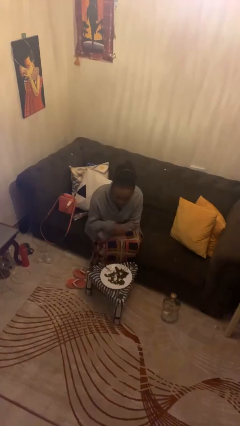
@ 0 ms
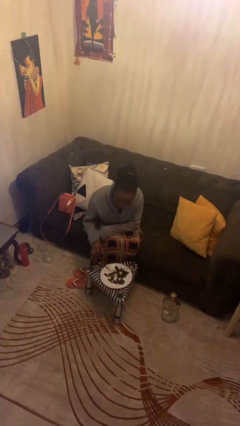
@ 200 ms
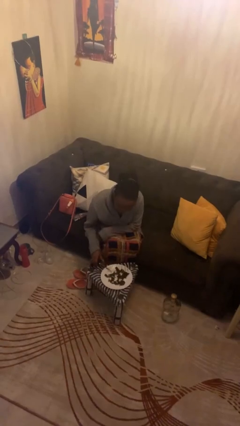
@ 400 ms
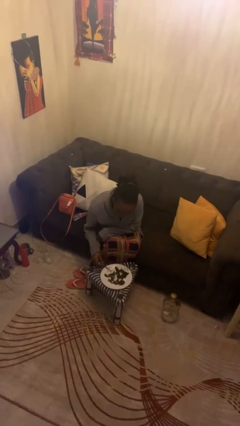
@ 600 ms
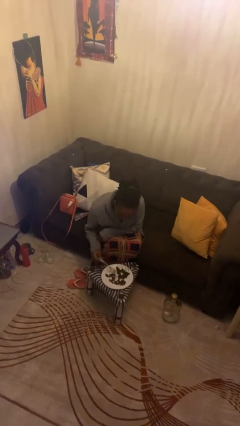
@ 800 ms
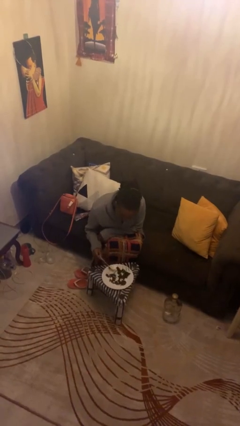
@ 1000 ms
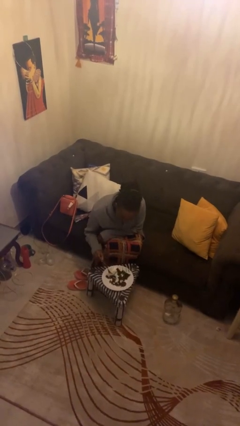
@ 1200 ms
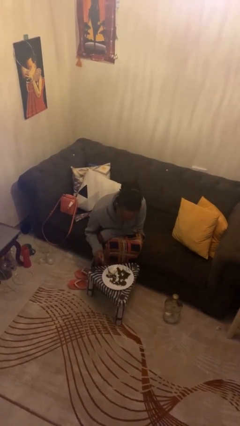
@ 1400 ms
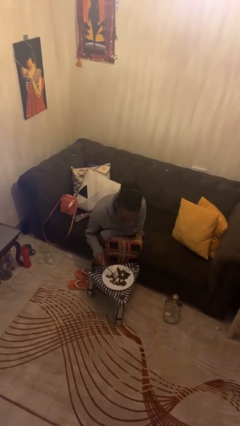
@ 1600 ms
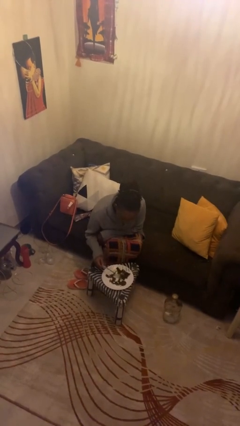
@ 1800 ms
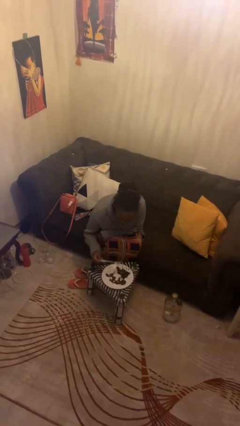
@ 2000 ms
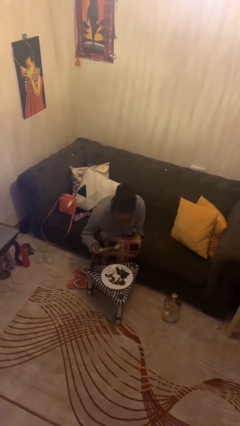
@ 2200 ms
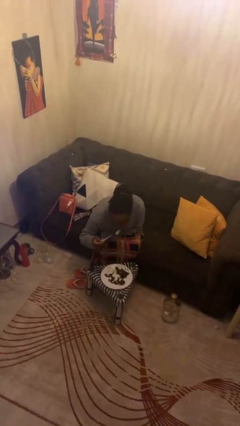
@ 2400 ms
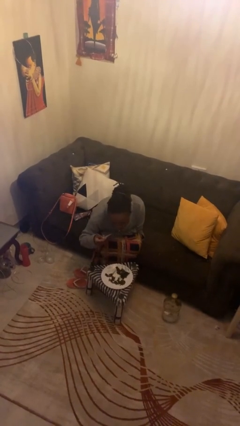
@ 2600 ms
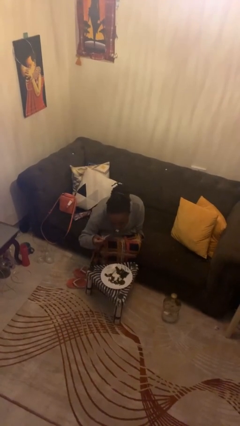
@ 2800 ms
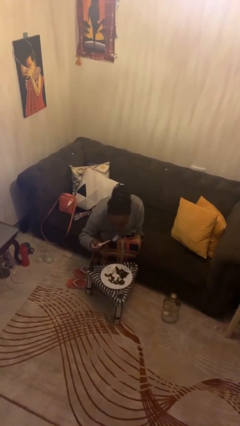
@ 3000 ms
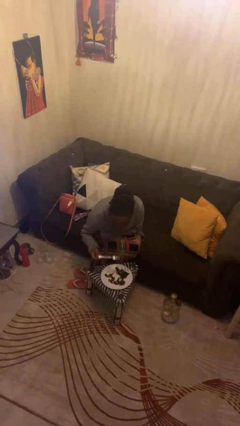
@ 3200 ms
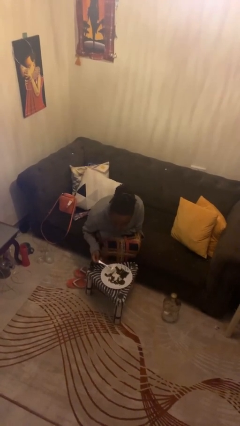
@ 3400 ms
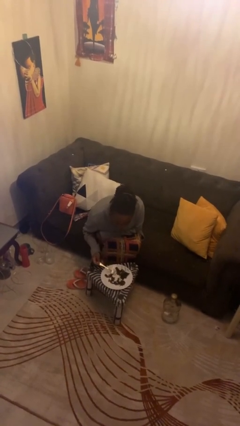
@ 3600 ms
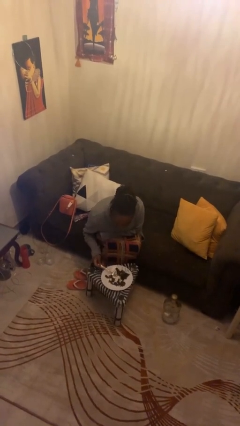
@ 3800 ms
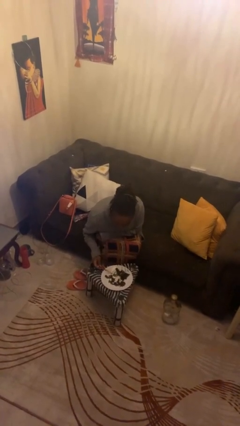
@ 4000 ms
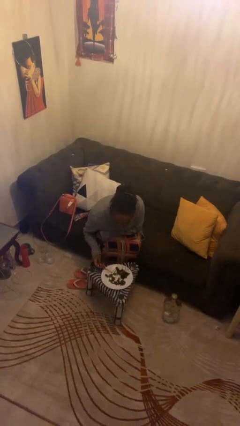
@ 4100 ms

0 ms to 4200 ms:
person eats with utensil

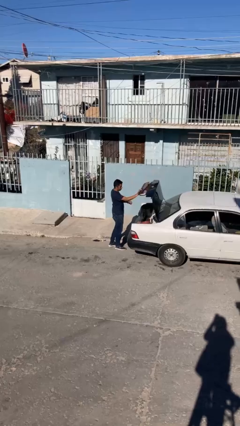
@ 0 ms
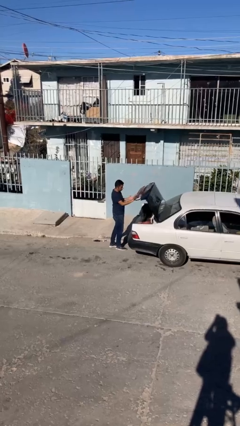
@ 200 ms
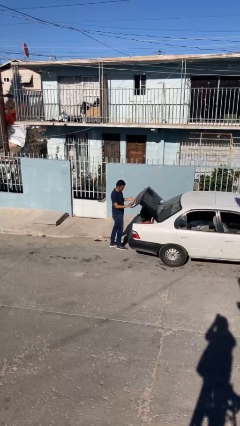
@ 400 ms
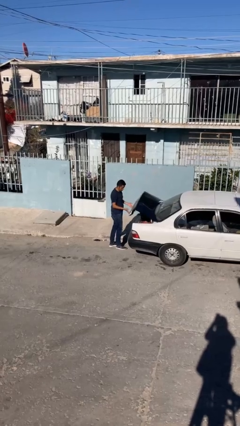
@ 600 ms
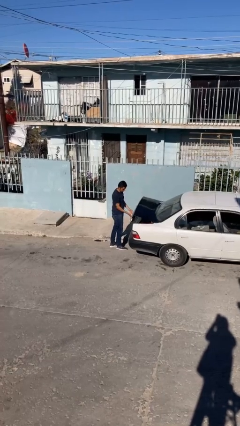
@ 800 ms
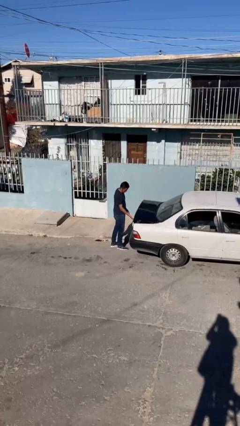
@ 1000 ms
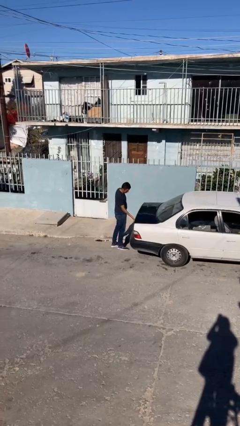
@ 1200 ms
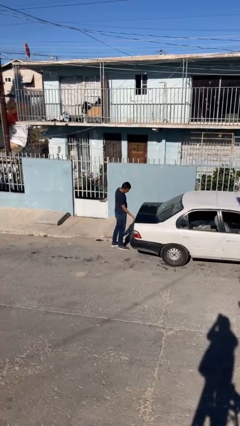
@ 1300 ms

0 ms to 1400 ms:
person closes car trunk

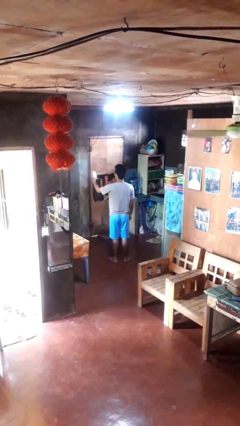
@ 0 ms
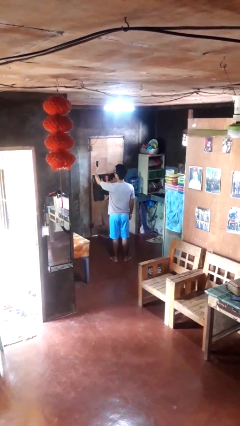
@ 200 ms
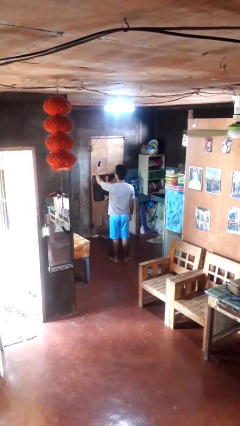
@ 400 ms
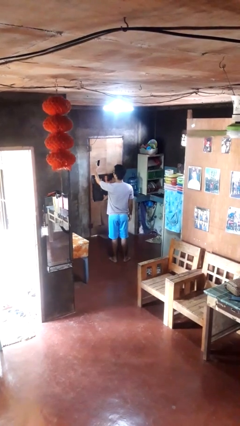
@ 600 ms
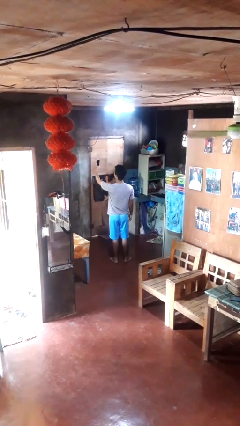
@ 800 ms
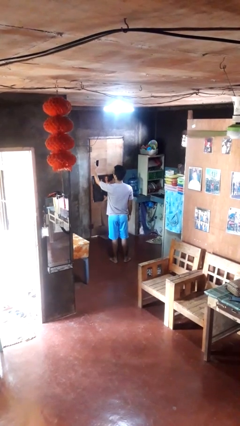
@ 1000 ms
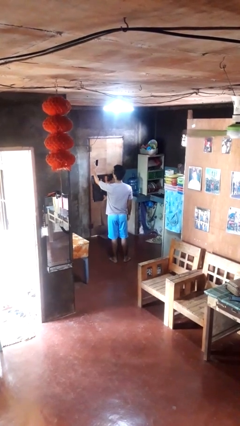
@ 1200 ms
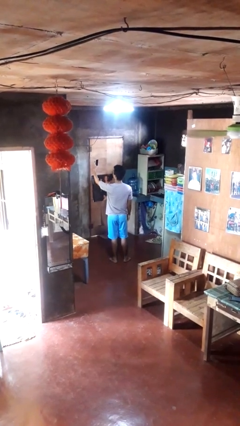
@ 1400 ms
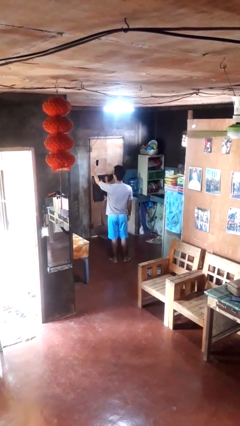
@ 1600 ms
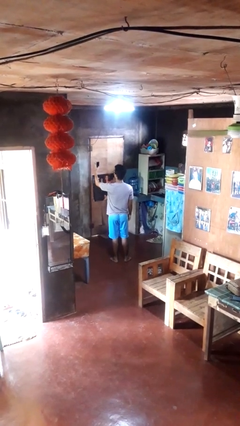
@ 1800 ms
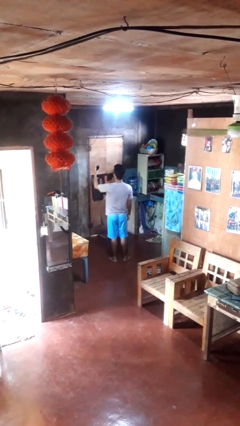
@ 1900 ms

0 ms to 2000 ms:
person takes selfie

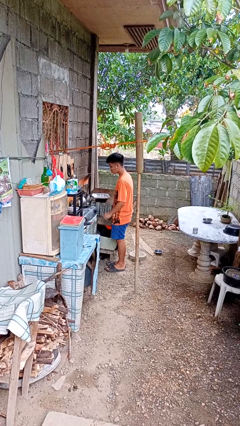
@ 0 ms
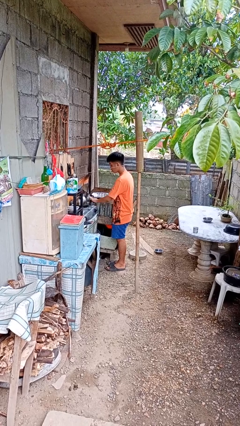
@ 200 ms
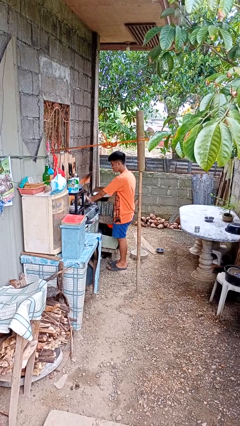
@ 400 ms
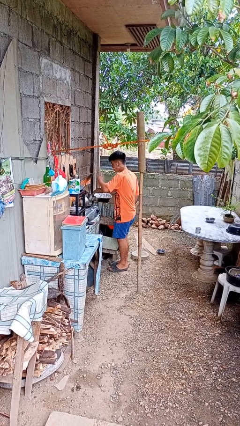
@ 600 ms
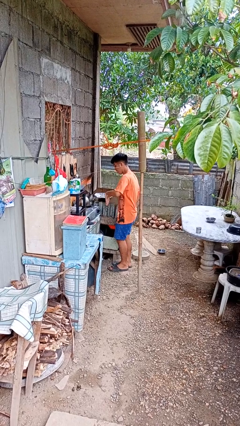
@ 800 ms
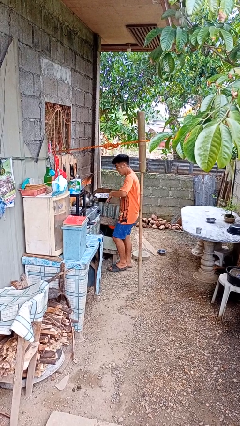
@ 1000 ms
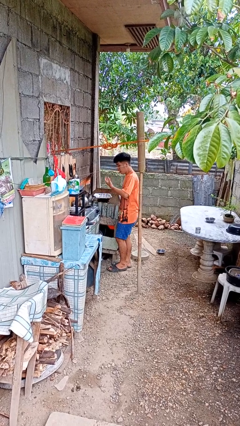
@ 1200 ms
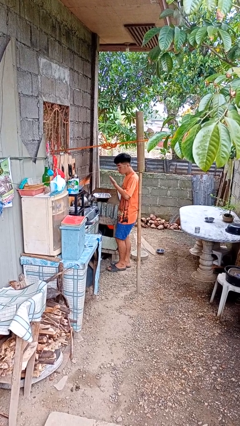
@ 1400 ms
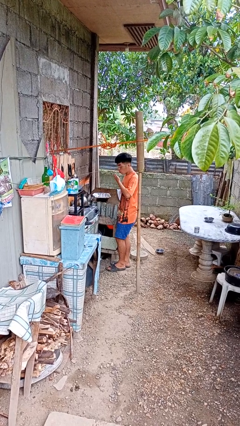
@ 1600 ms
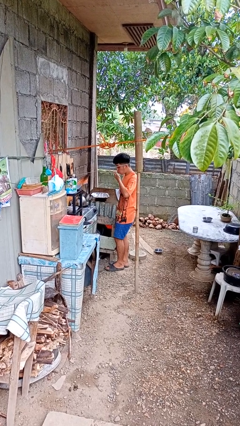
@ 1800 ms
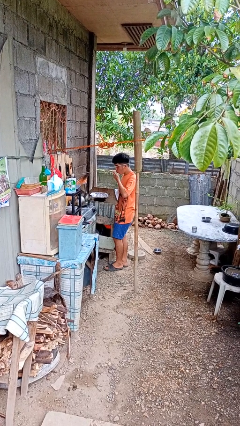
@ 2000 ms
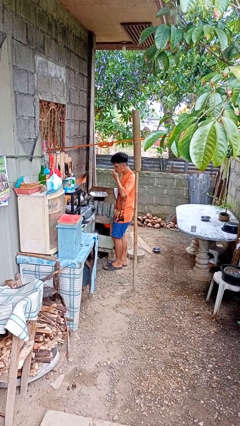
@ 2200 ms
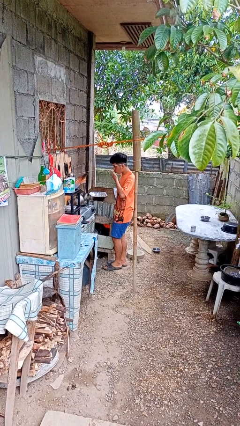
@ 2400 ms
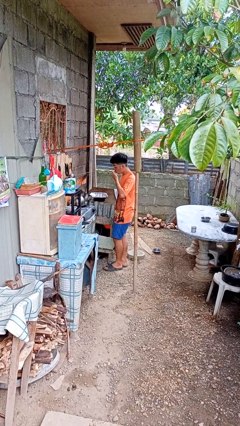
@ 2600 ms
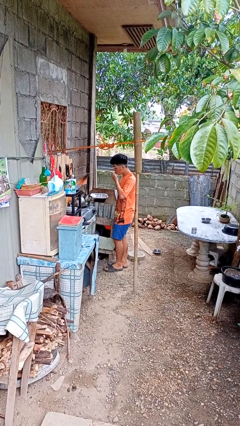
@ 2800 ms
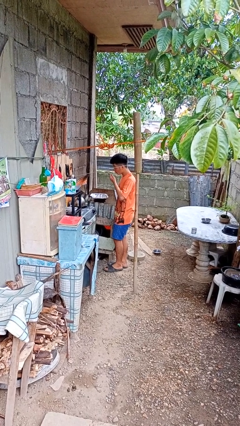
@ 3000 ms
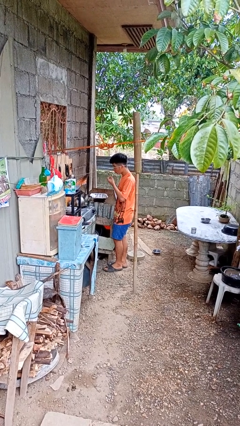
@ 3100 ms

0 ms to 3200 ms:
person burns hand

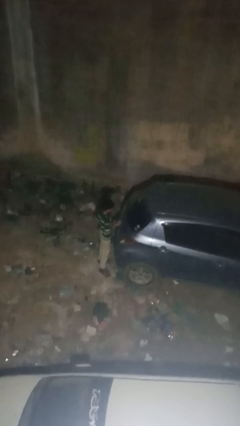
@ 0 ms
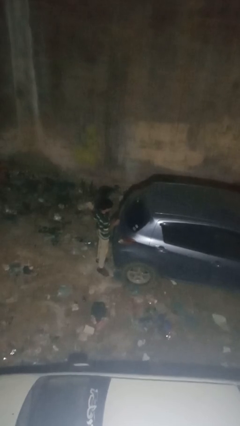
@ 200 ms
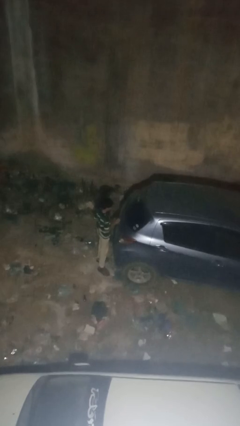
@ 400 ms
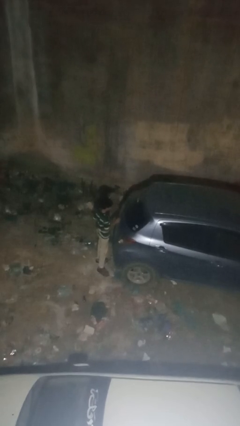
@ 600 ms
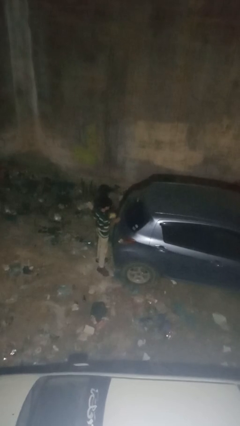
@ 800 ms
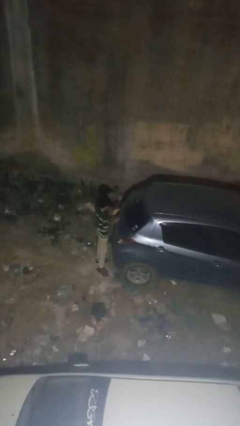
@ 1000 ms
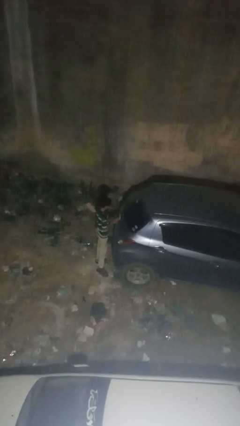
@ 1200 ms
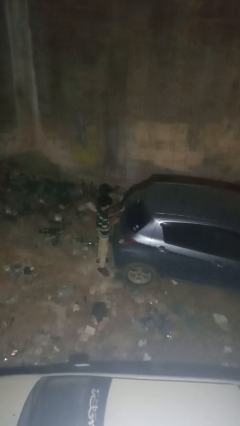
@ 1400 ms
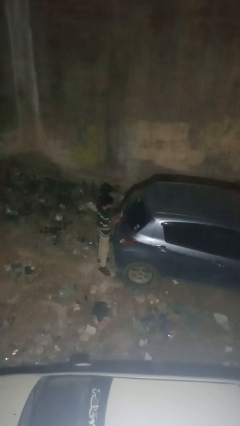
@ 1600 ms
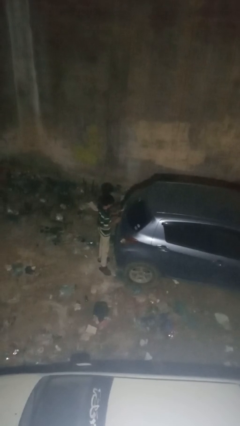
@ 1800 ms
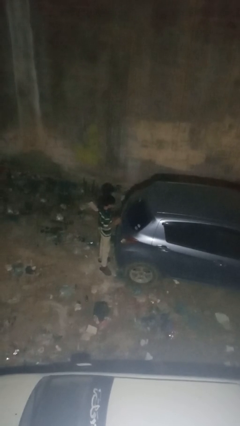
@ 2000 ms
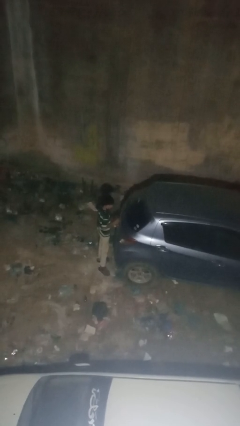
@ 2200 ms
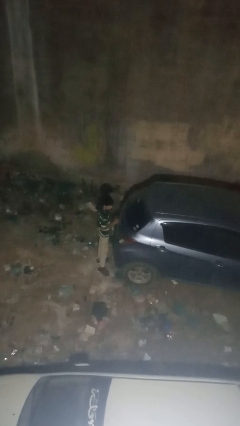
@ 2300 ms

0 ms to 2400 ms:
person polishes car with rag

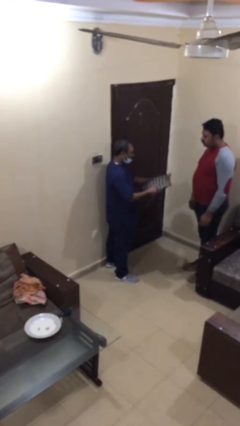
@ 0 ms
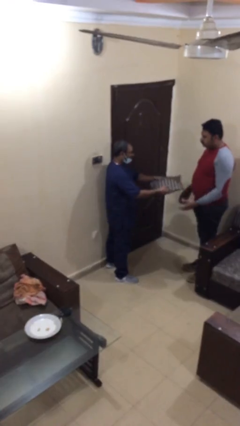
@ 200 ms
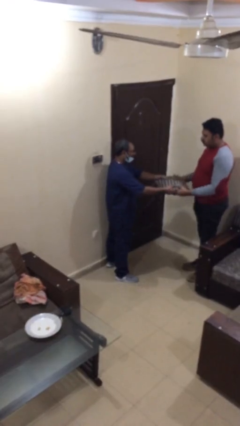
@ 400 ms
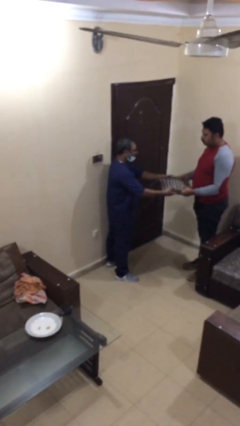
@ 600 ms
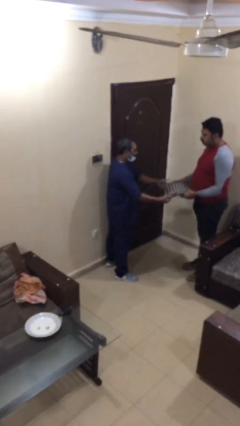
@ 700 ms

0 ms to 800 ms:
person transfers object to person

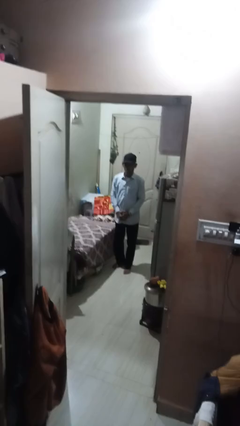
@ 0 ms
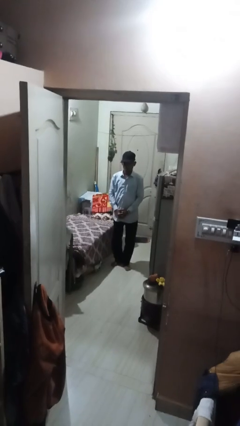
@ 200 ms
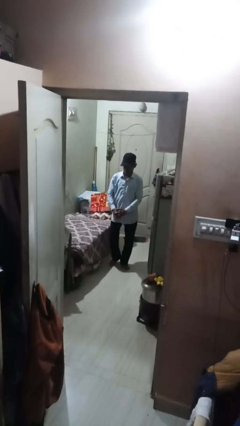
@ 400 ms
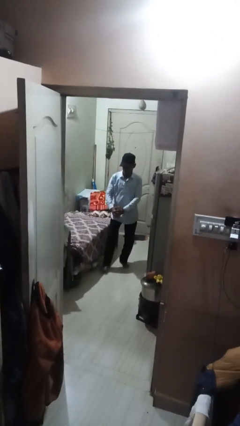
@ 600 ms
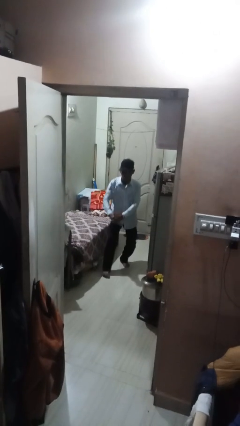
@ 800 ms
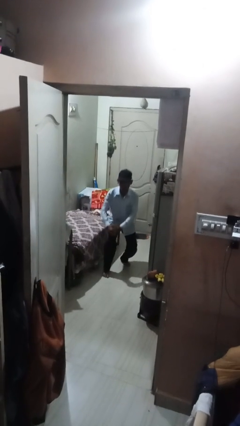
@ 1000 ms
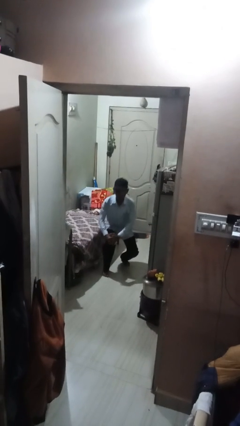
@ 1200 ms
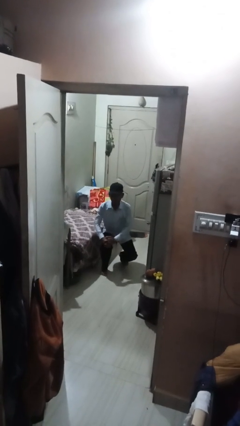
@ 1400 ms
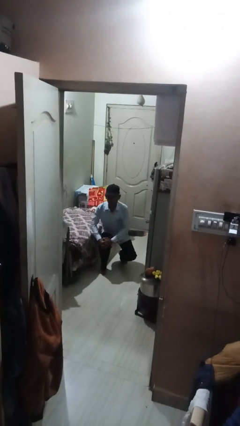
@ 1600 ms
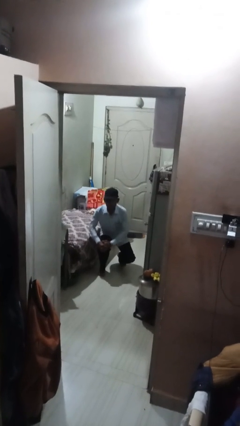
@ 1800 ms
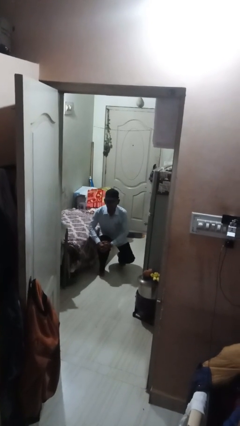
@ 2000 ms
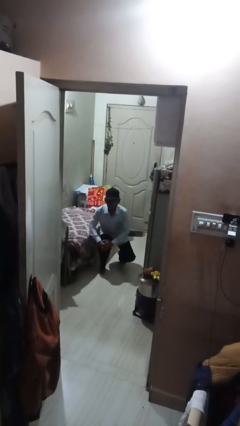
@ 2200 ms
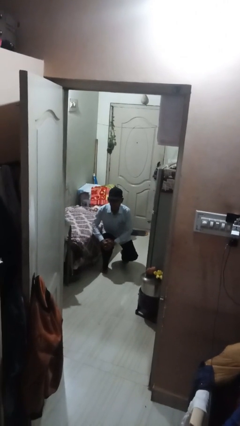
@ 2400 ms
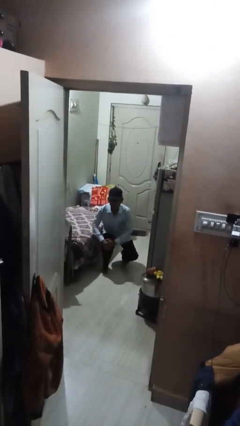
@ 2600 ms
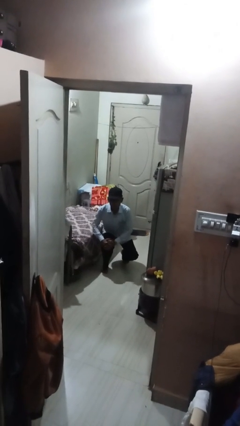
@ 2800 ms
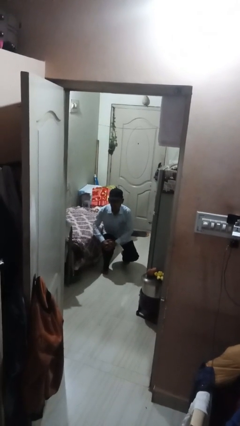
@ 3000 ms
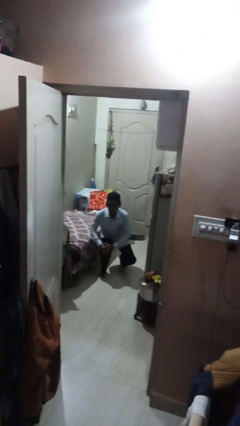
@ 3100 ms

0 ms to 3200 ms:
person exercises with lunges
